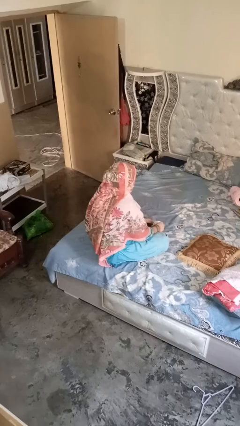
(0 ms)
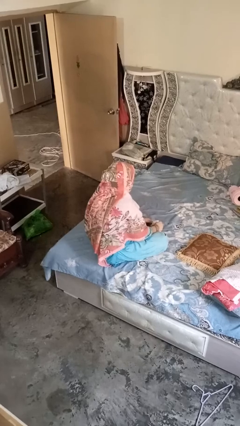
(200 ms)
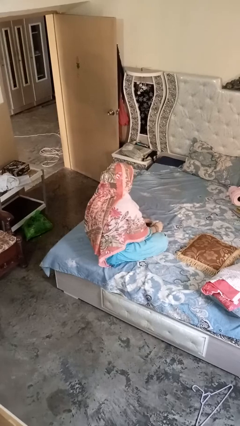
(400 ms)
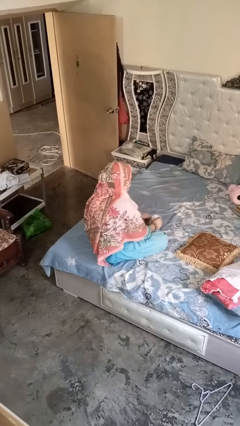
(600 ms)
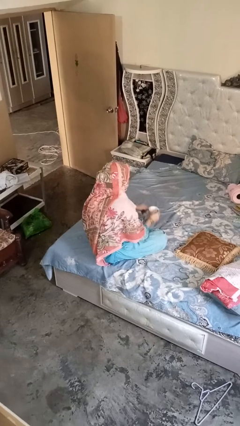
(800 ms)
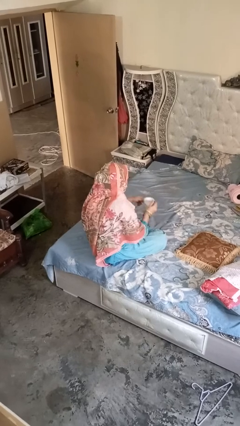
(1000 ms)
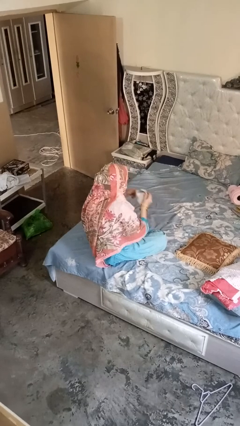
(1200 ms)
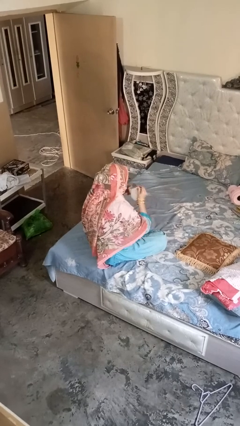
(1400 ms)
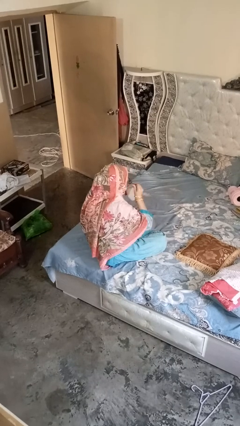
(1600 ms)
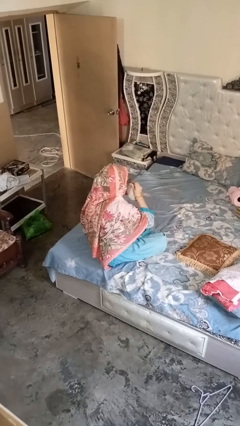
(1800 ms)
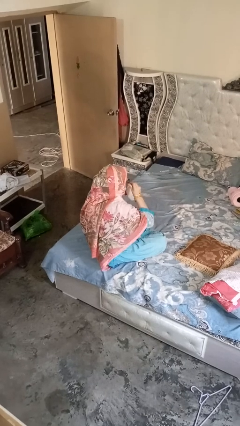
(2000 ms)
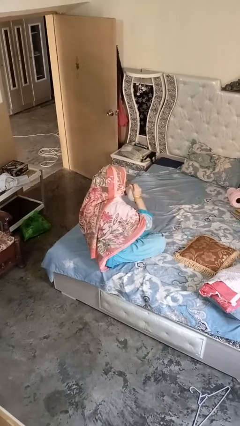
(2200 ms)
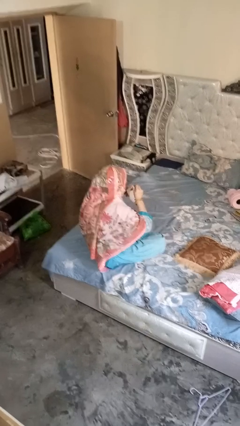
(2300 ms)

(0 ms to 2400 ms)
person drinks from mug

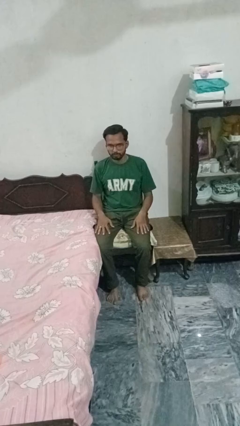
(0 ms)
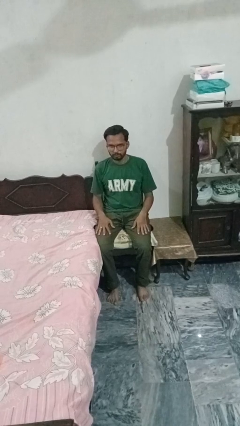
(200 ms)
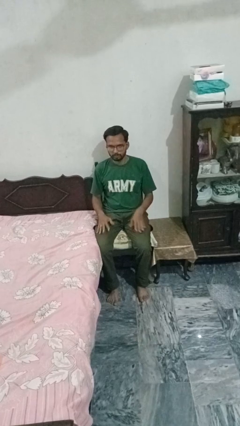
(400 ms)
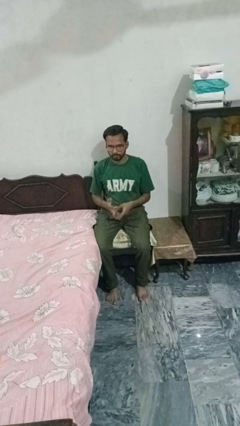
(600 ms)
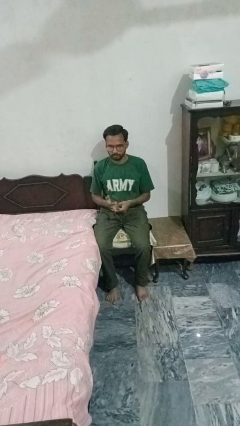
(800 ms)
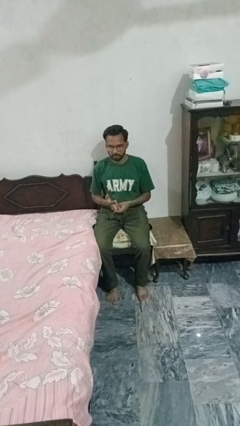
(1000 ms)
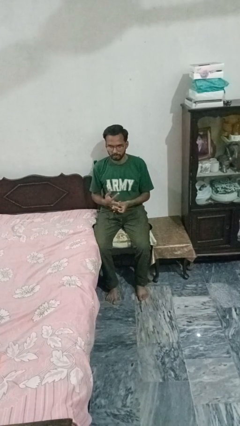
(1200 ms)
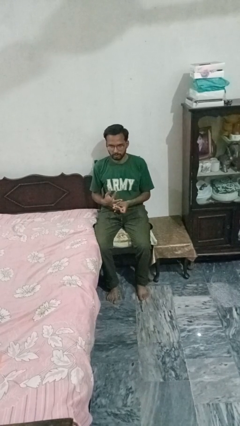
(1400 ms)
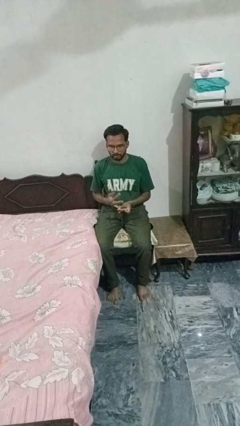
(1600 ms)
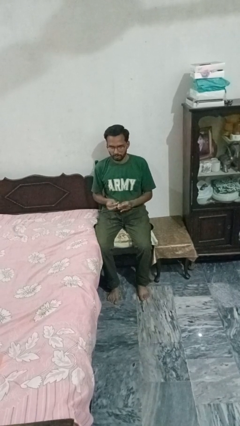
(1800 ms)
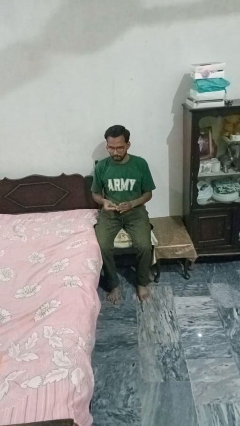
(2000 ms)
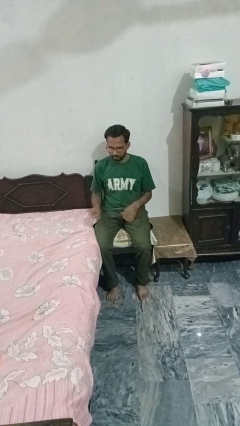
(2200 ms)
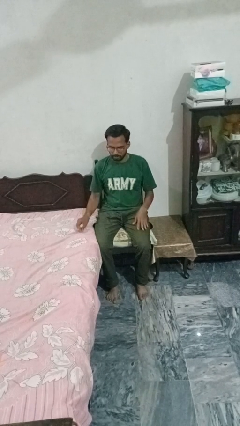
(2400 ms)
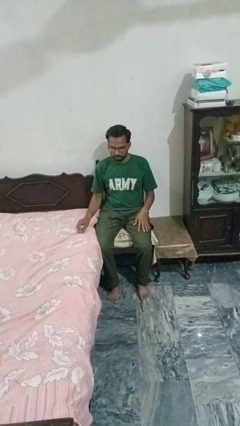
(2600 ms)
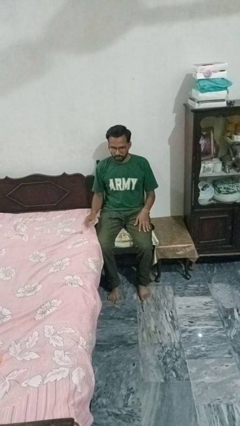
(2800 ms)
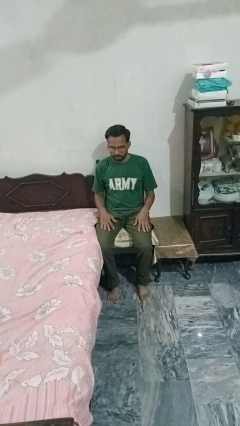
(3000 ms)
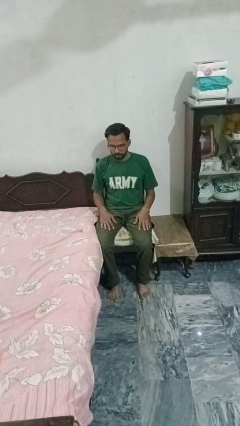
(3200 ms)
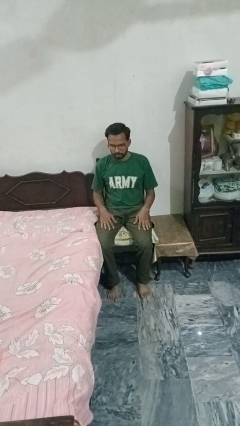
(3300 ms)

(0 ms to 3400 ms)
person takes off ring

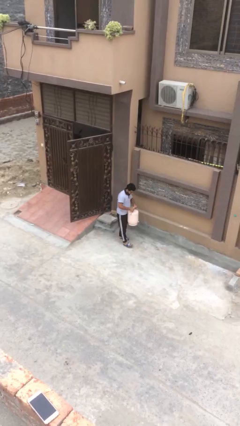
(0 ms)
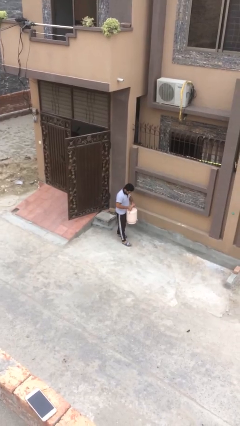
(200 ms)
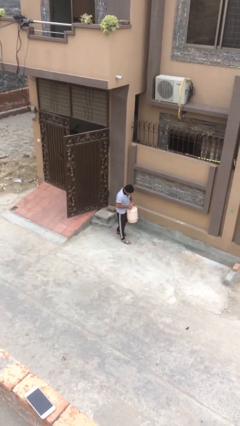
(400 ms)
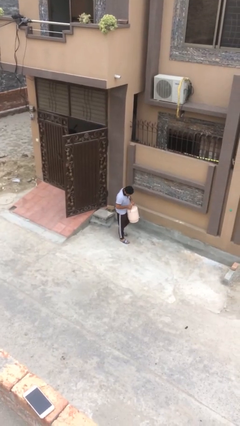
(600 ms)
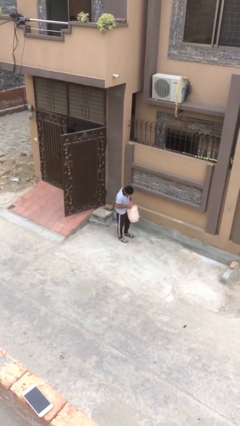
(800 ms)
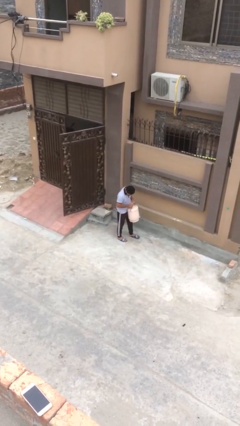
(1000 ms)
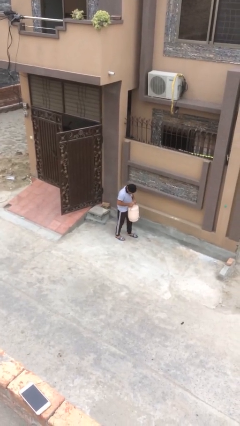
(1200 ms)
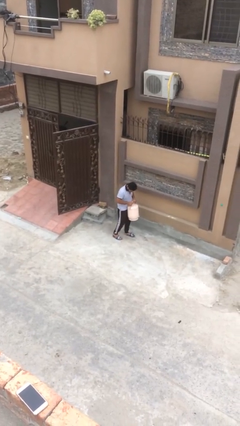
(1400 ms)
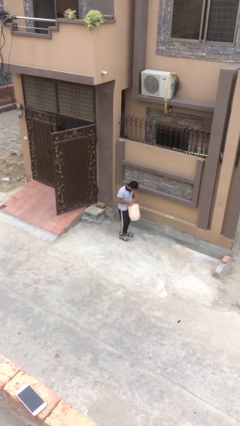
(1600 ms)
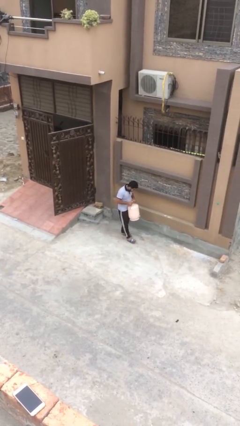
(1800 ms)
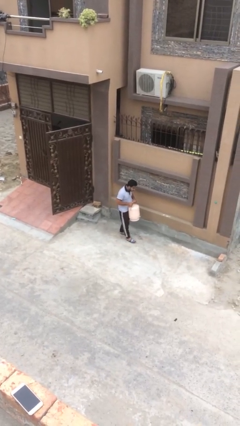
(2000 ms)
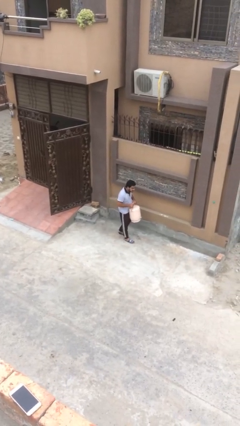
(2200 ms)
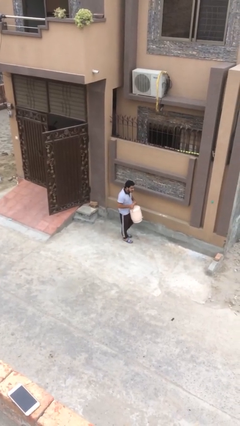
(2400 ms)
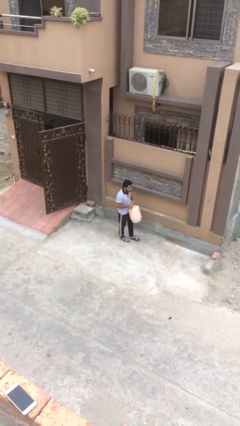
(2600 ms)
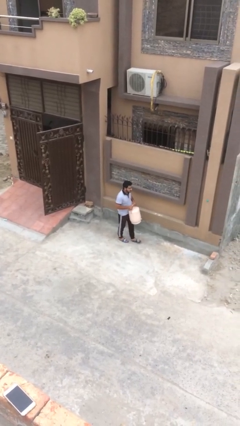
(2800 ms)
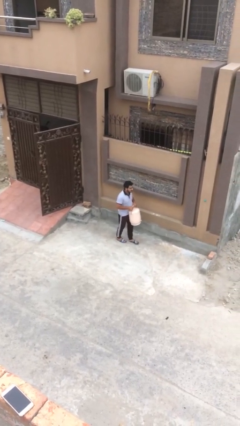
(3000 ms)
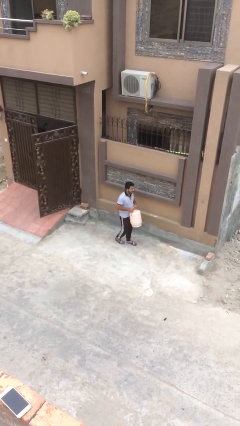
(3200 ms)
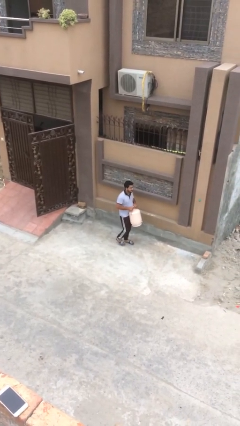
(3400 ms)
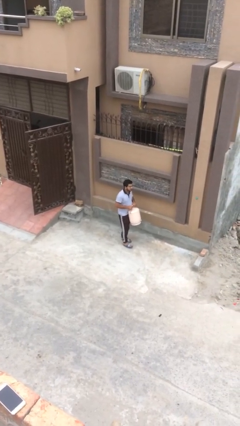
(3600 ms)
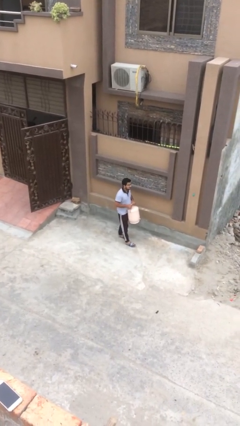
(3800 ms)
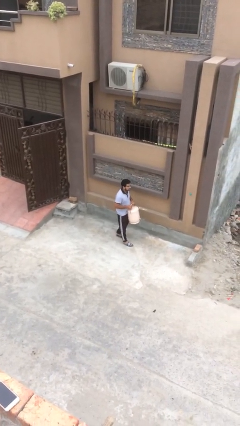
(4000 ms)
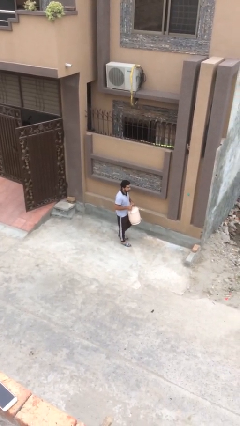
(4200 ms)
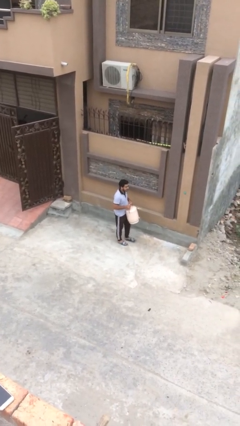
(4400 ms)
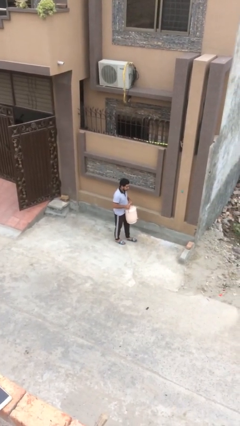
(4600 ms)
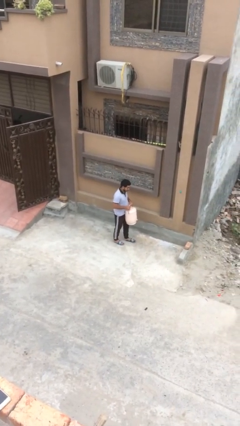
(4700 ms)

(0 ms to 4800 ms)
person carries heavy object

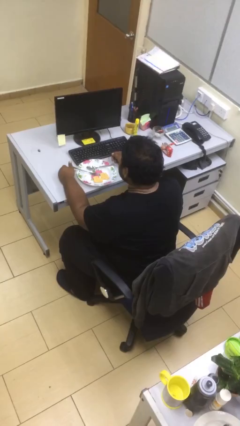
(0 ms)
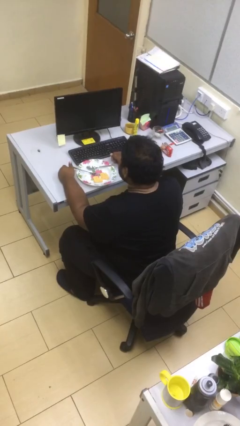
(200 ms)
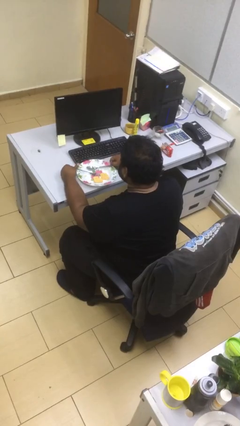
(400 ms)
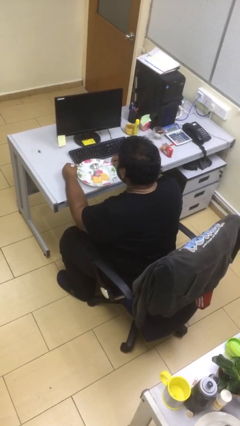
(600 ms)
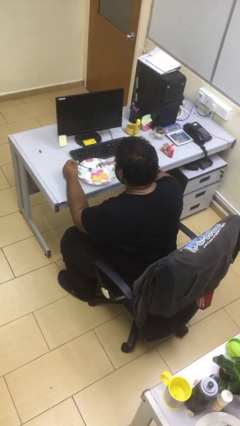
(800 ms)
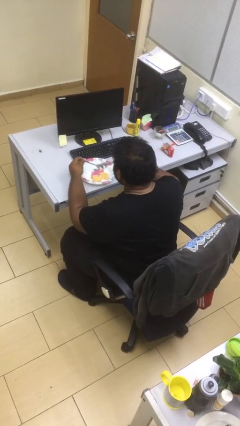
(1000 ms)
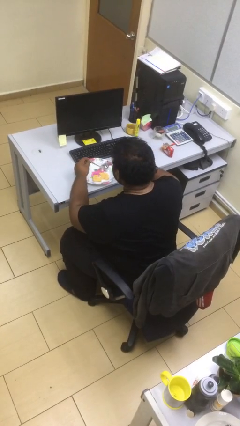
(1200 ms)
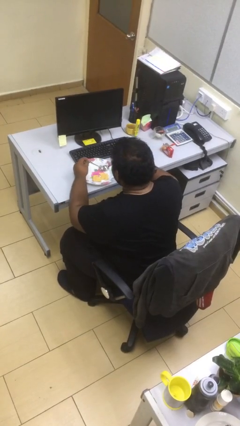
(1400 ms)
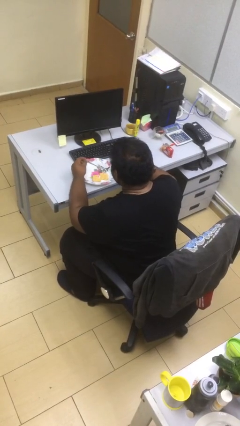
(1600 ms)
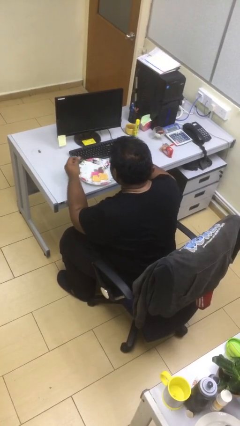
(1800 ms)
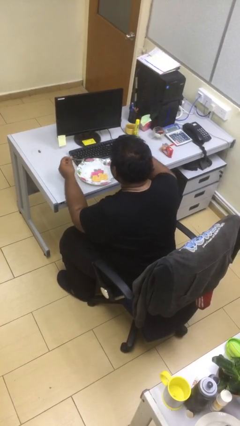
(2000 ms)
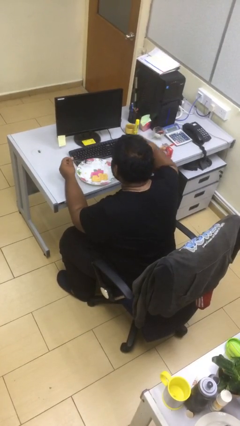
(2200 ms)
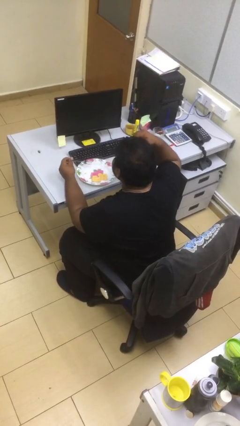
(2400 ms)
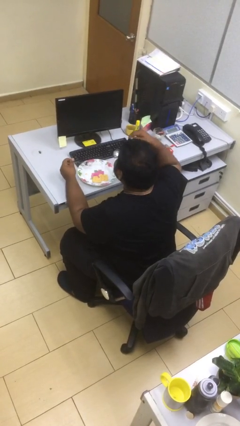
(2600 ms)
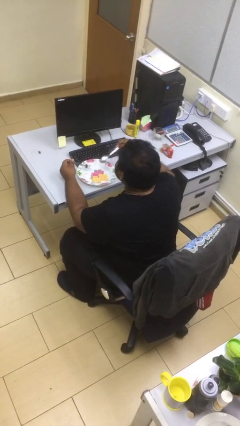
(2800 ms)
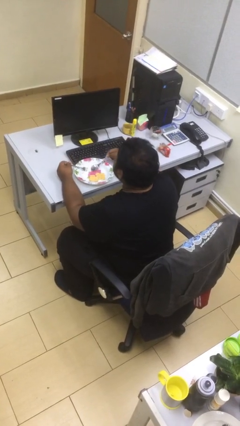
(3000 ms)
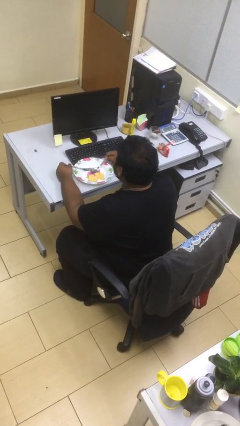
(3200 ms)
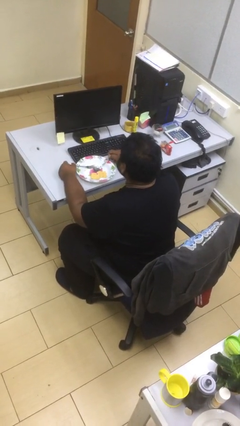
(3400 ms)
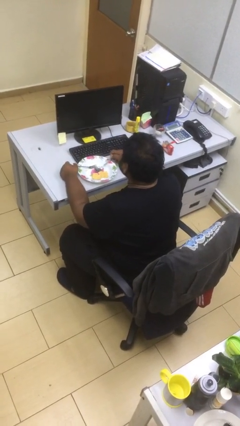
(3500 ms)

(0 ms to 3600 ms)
person eats with utensil

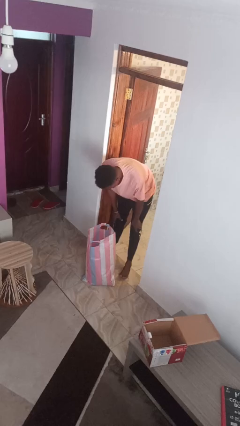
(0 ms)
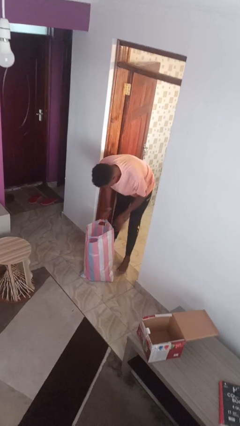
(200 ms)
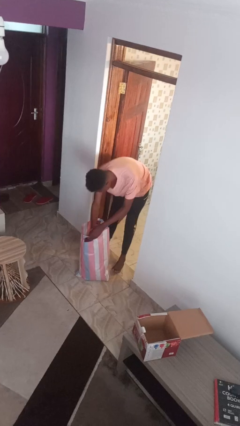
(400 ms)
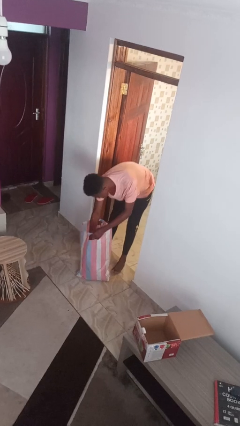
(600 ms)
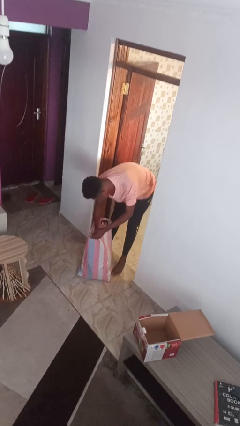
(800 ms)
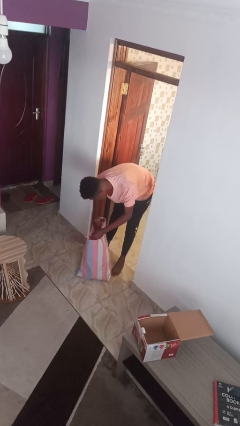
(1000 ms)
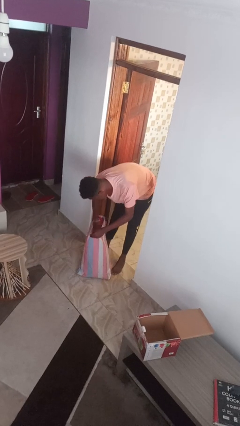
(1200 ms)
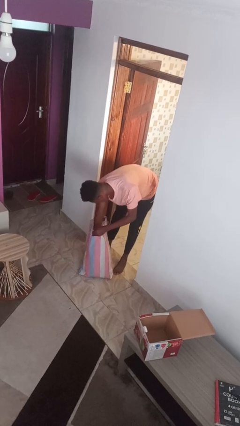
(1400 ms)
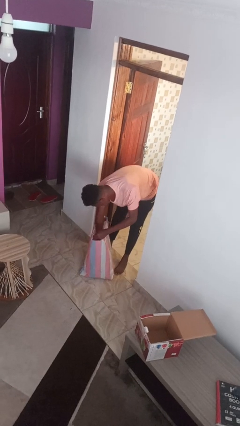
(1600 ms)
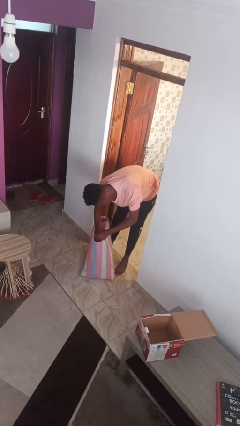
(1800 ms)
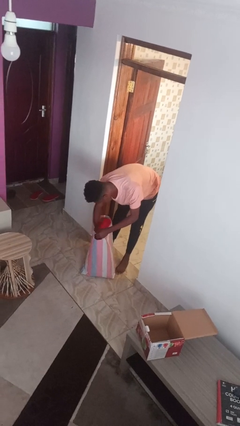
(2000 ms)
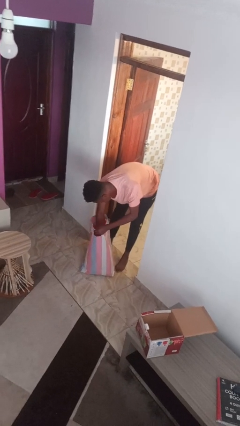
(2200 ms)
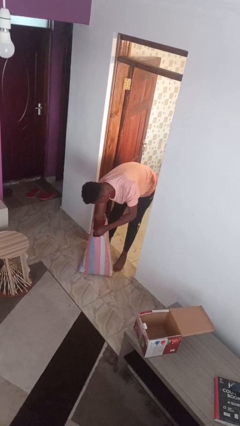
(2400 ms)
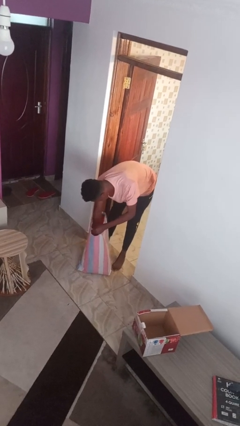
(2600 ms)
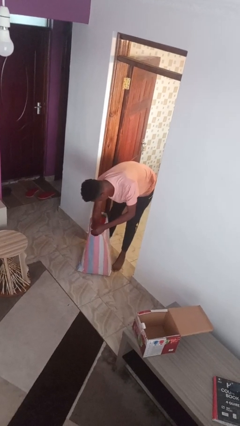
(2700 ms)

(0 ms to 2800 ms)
person searches in bag

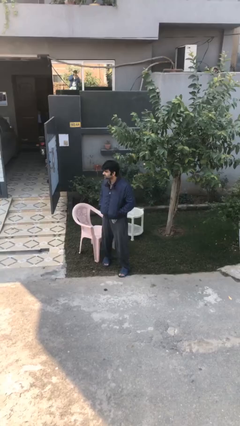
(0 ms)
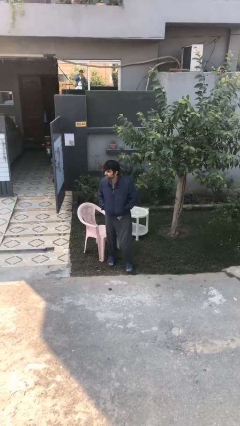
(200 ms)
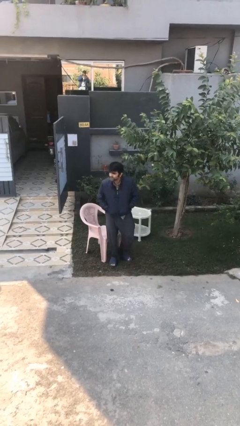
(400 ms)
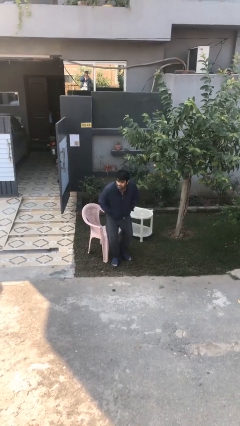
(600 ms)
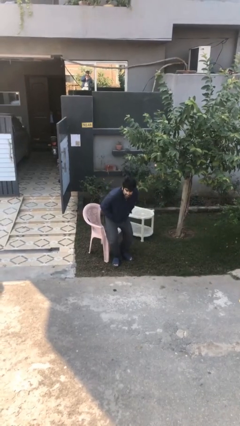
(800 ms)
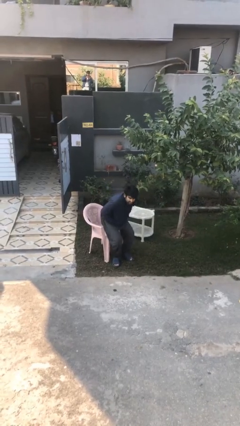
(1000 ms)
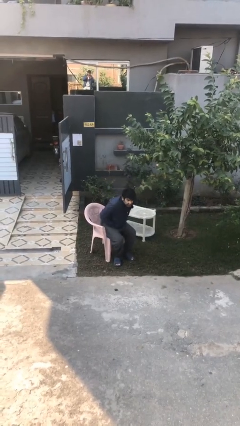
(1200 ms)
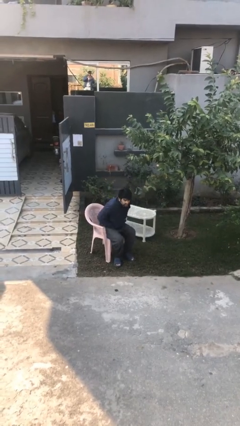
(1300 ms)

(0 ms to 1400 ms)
person sits down
